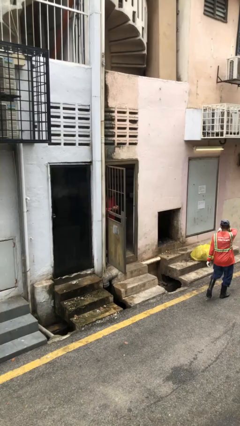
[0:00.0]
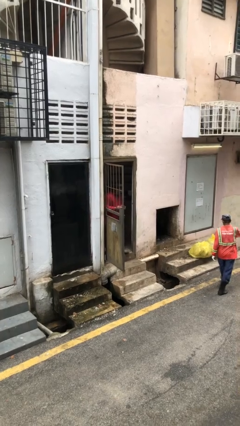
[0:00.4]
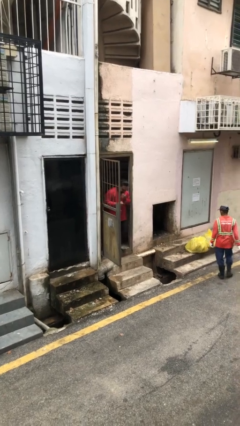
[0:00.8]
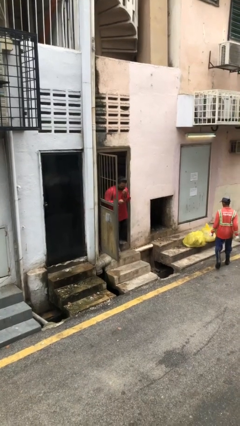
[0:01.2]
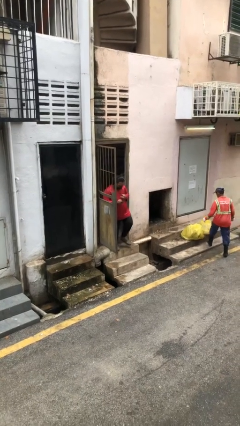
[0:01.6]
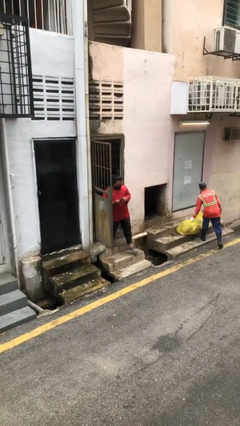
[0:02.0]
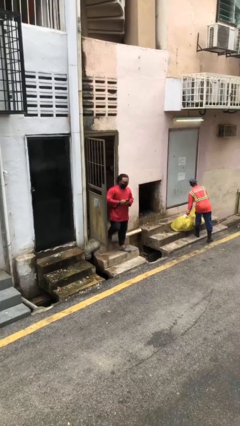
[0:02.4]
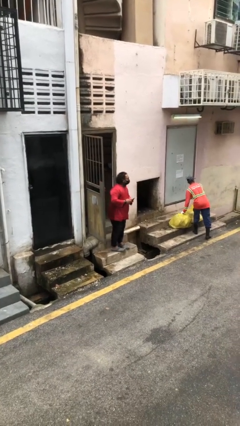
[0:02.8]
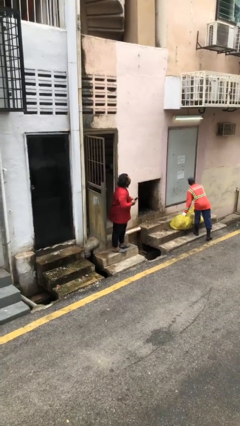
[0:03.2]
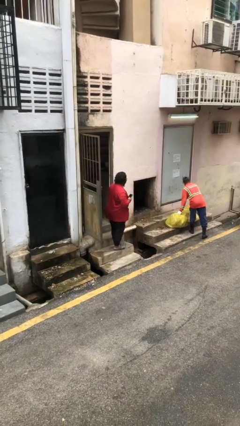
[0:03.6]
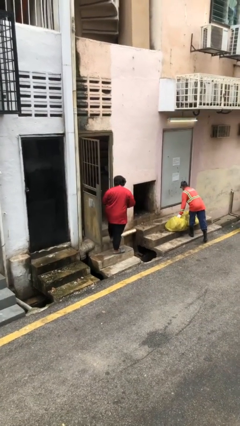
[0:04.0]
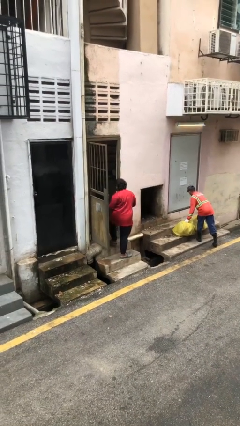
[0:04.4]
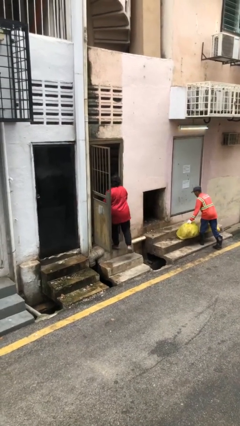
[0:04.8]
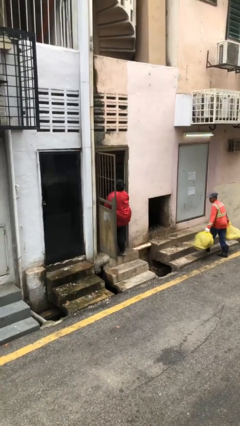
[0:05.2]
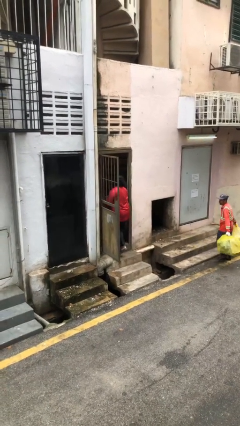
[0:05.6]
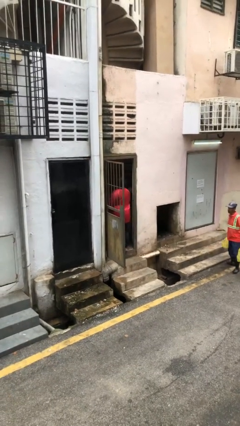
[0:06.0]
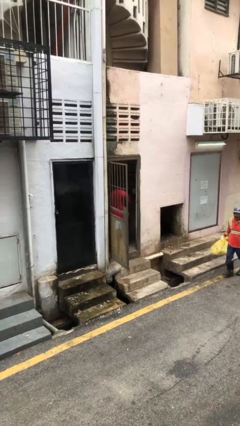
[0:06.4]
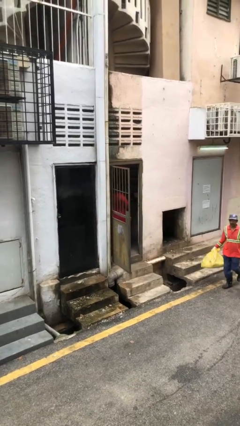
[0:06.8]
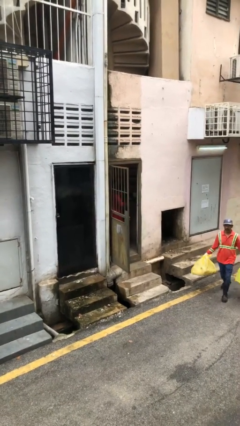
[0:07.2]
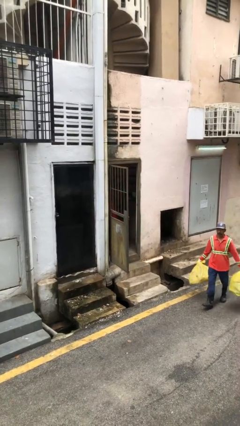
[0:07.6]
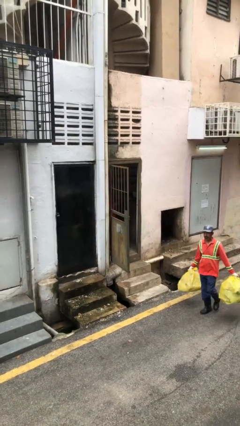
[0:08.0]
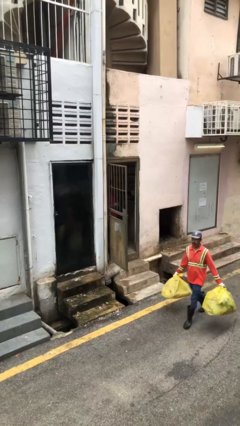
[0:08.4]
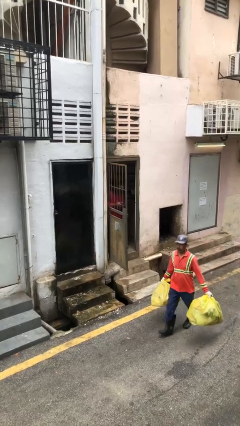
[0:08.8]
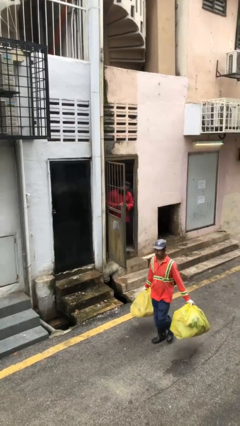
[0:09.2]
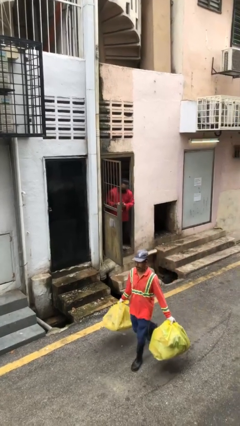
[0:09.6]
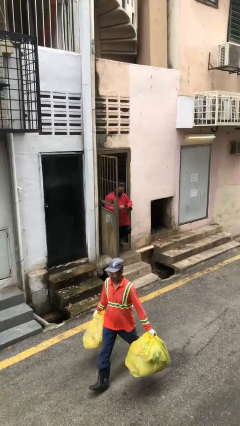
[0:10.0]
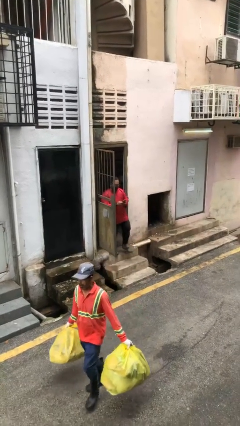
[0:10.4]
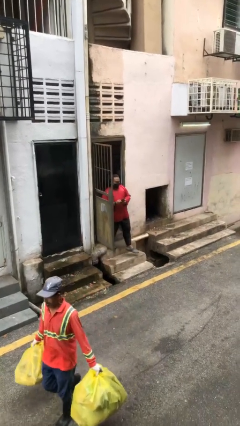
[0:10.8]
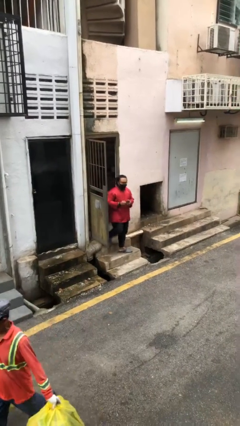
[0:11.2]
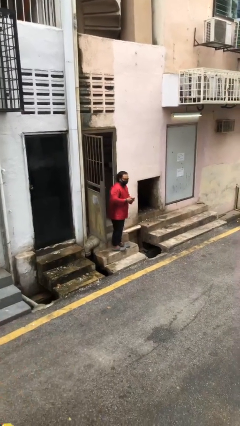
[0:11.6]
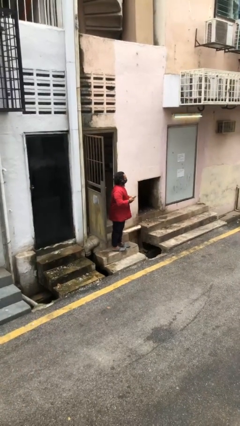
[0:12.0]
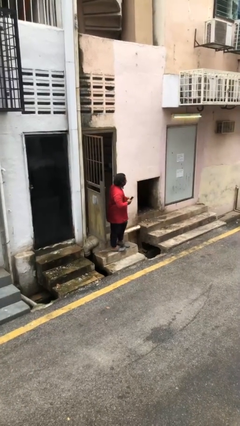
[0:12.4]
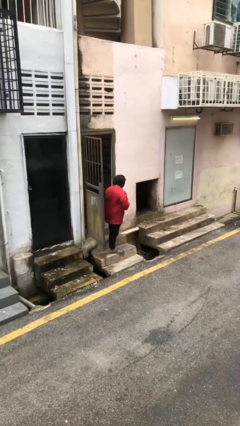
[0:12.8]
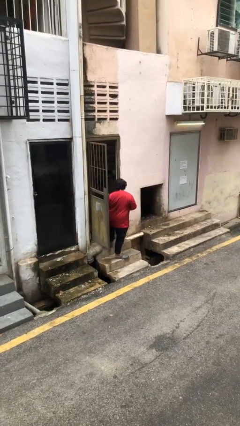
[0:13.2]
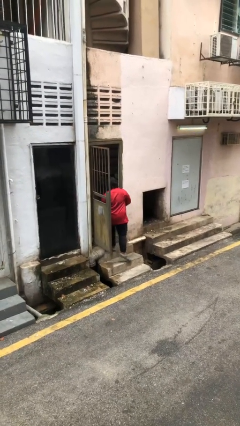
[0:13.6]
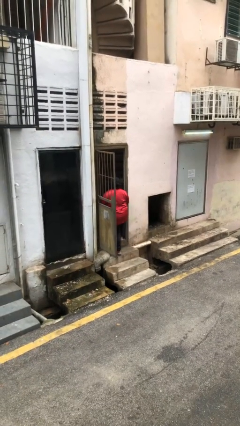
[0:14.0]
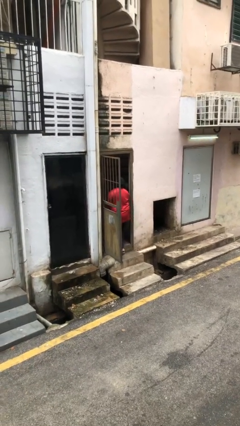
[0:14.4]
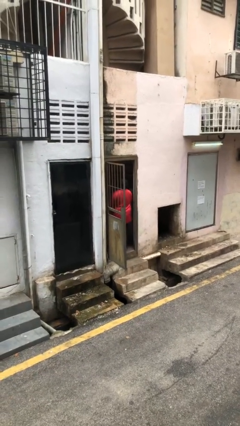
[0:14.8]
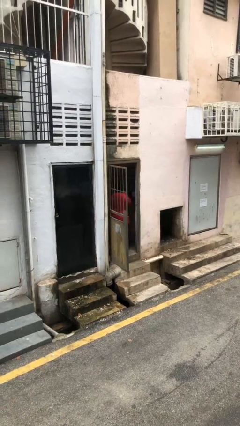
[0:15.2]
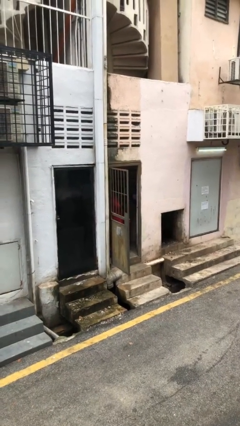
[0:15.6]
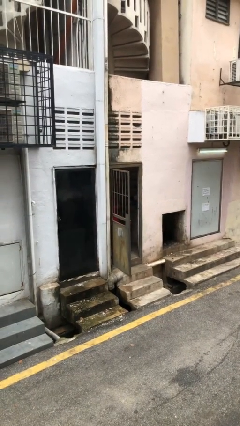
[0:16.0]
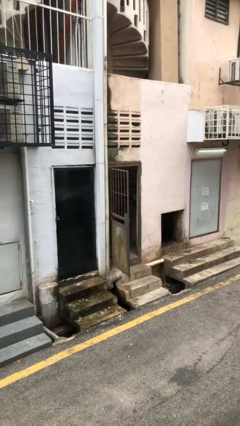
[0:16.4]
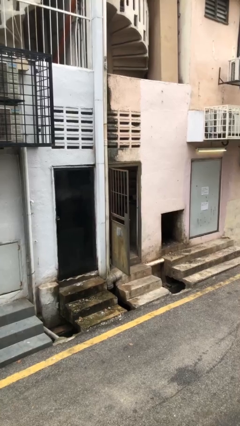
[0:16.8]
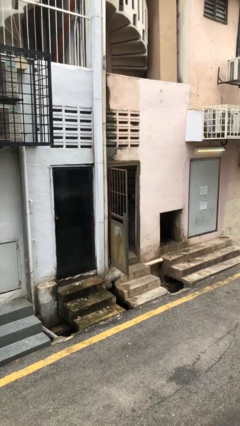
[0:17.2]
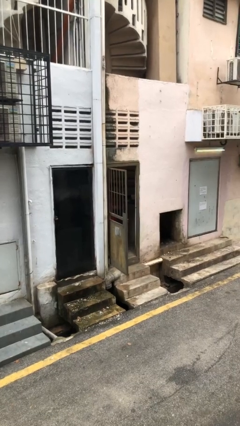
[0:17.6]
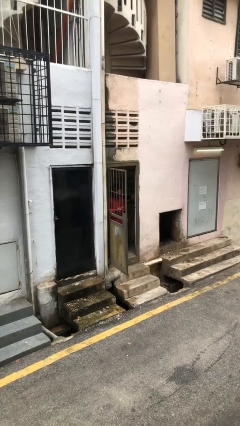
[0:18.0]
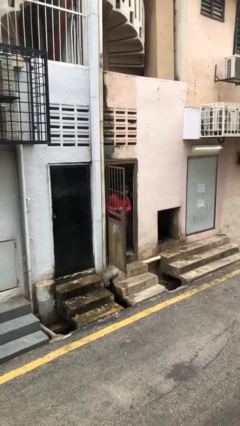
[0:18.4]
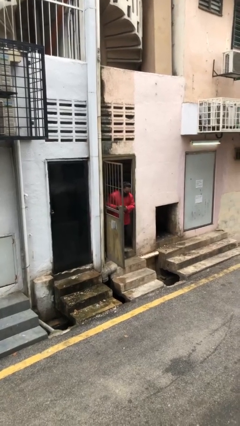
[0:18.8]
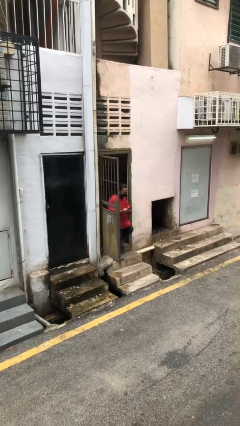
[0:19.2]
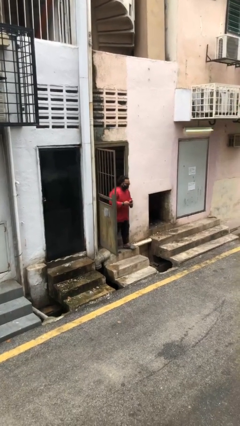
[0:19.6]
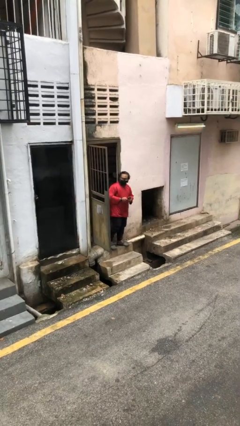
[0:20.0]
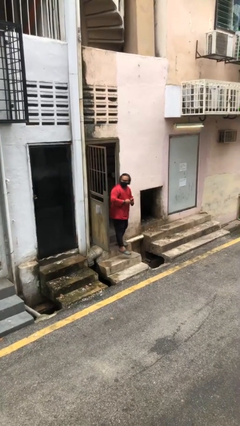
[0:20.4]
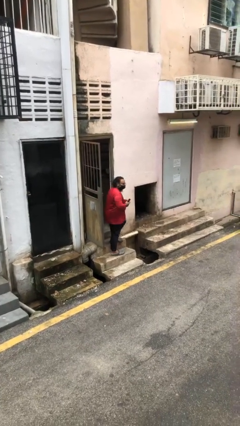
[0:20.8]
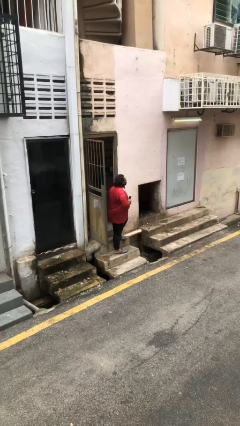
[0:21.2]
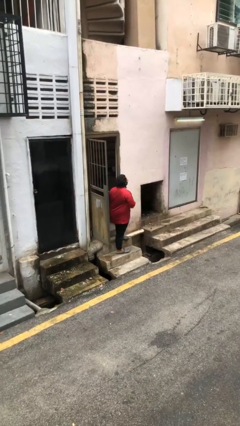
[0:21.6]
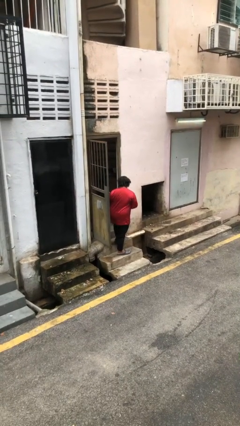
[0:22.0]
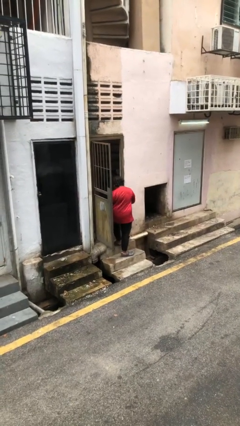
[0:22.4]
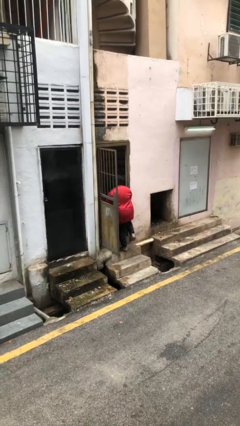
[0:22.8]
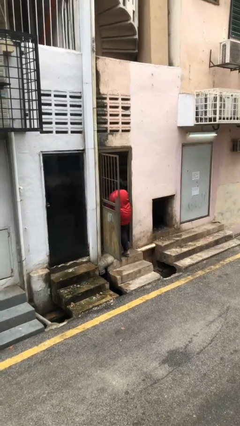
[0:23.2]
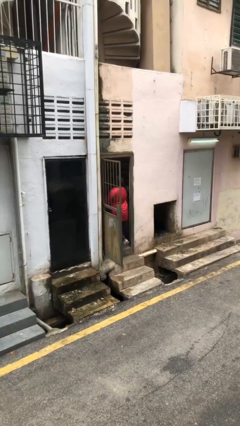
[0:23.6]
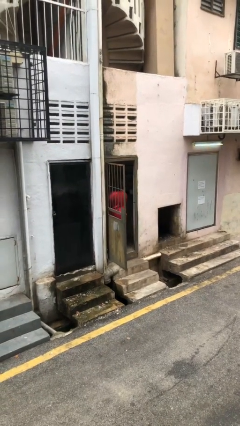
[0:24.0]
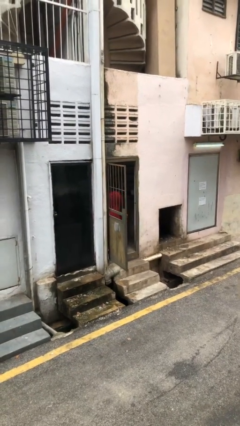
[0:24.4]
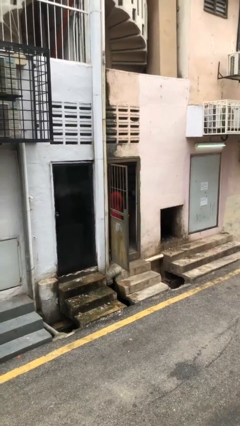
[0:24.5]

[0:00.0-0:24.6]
person texts on phone

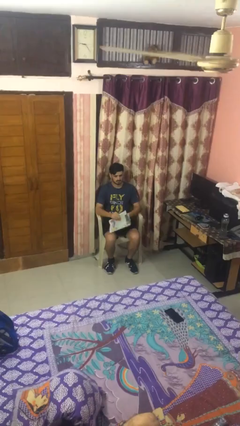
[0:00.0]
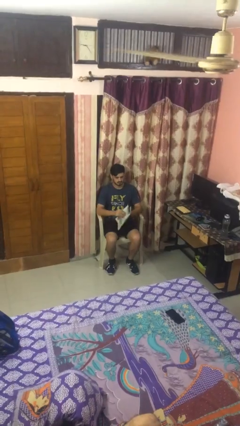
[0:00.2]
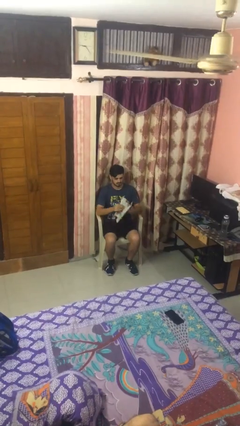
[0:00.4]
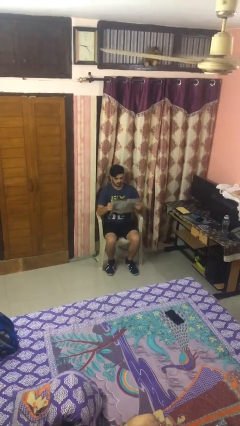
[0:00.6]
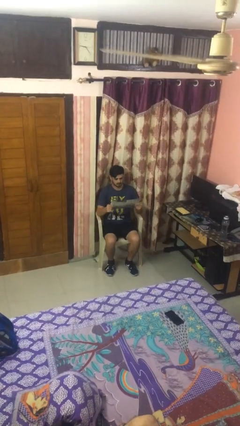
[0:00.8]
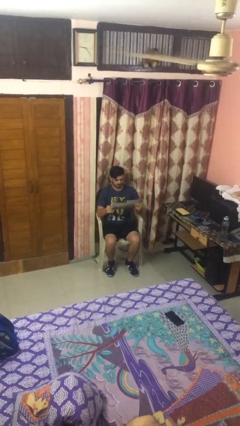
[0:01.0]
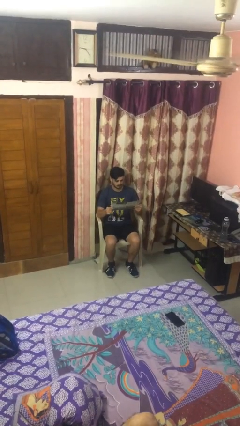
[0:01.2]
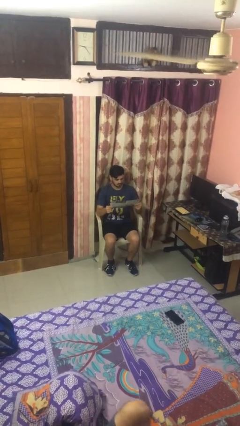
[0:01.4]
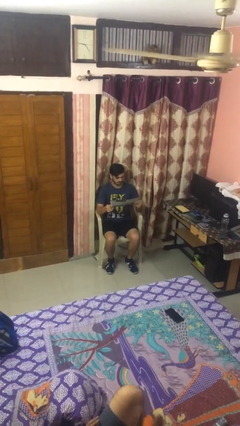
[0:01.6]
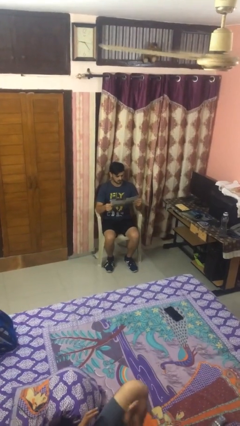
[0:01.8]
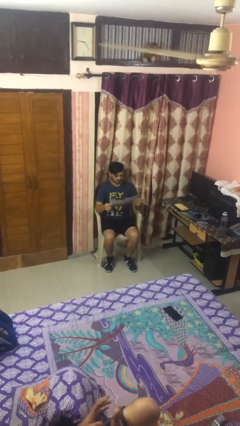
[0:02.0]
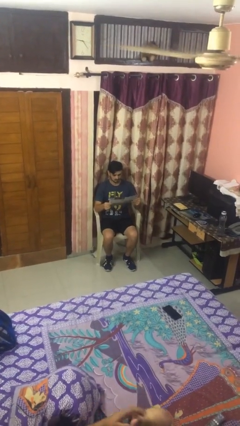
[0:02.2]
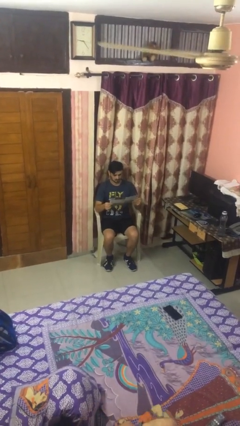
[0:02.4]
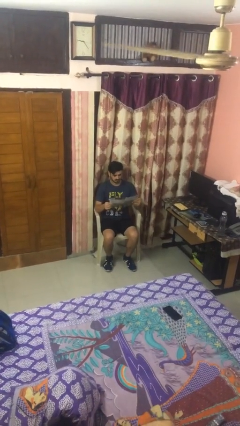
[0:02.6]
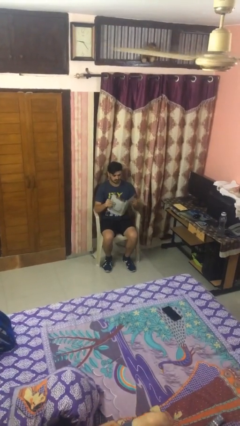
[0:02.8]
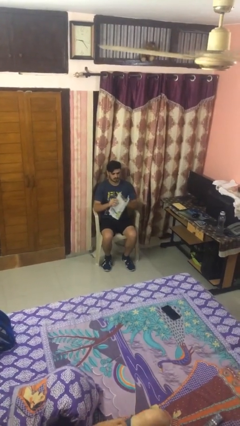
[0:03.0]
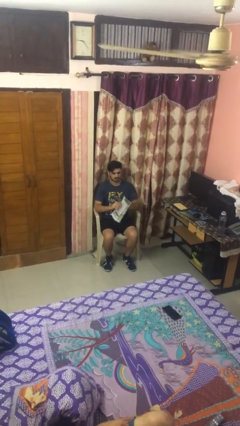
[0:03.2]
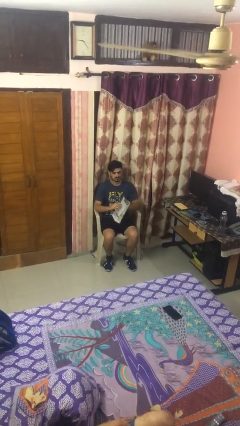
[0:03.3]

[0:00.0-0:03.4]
person reads newspaper

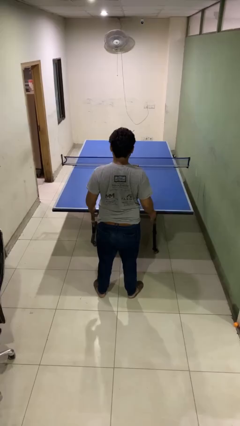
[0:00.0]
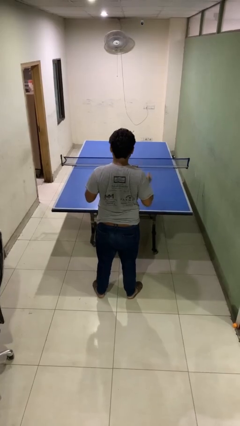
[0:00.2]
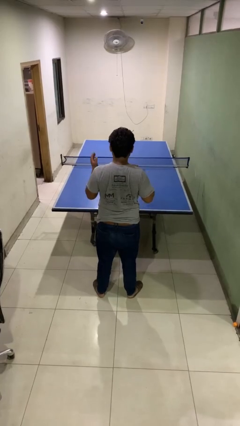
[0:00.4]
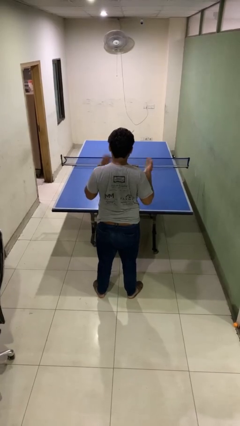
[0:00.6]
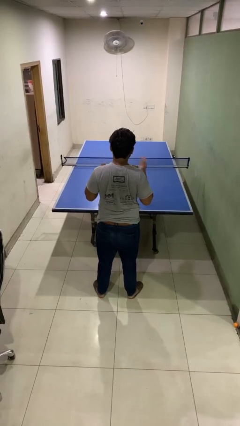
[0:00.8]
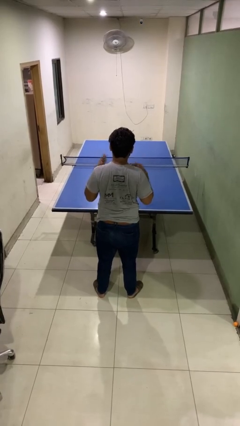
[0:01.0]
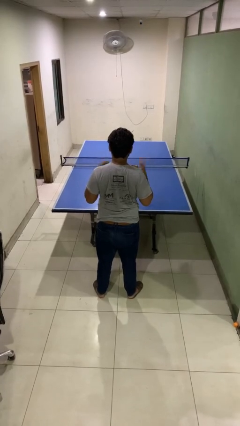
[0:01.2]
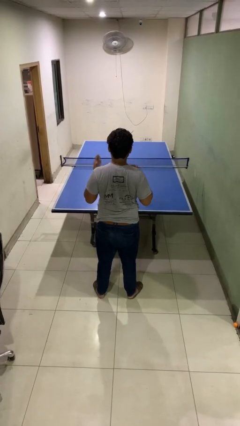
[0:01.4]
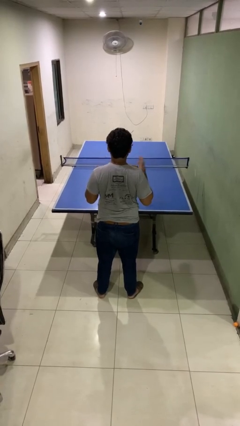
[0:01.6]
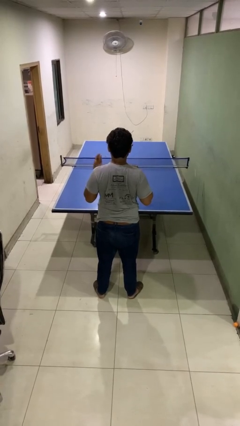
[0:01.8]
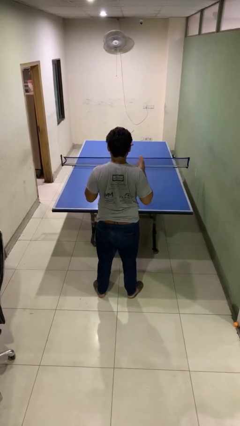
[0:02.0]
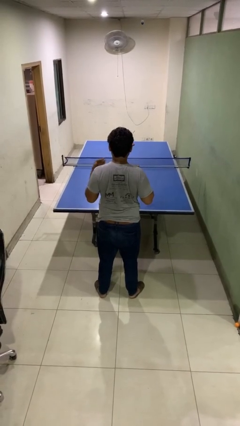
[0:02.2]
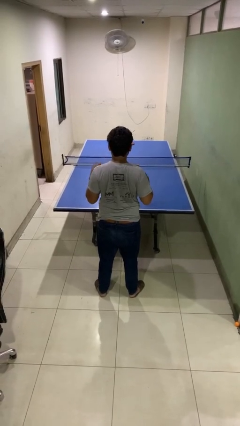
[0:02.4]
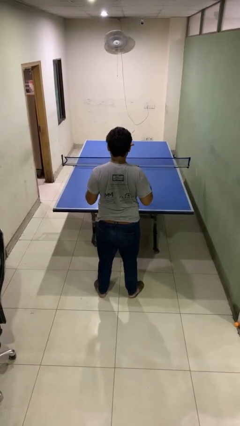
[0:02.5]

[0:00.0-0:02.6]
person drums on chest
